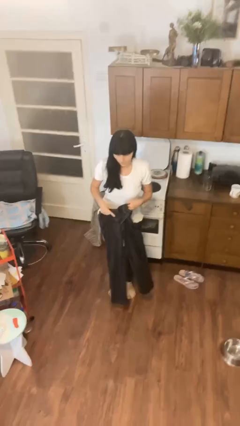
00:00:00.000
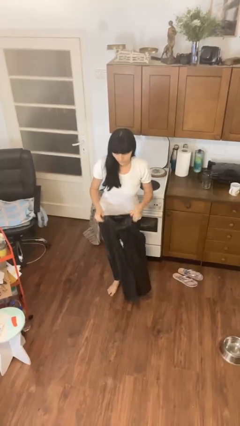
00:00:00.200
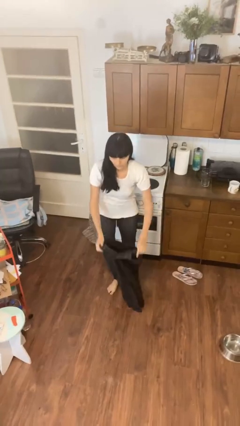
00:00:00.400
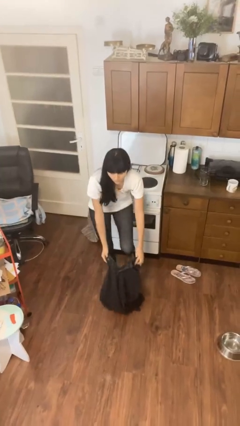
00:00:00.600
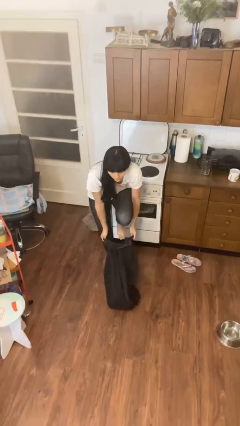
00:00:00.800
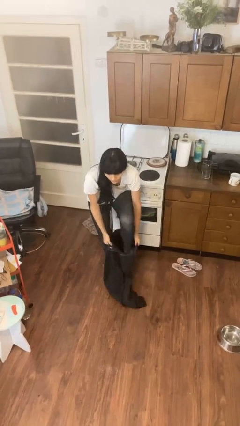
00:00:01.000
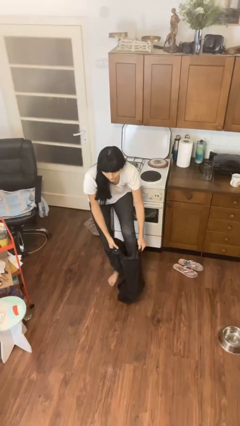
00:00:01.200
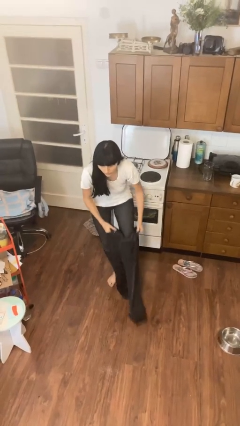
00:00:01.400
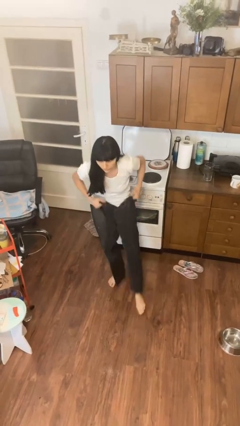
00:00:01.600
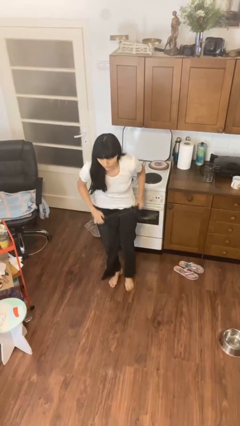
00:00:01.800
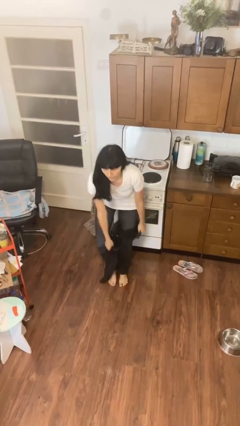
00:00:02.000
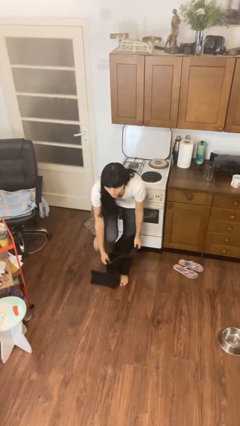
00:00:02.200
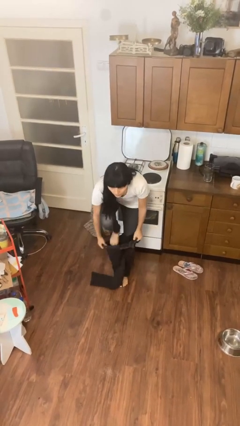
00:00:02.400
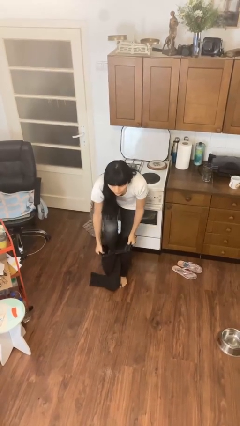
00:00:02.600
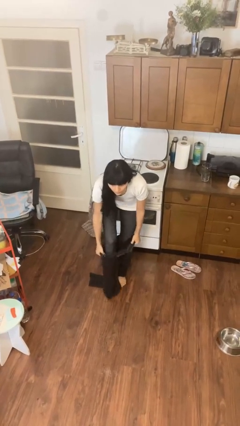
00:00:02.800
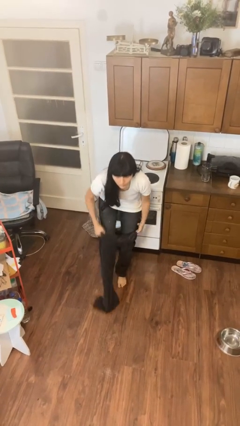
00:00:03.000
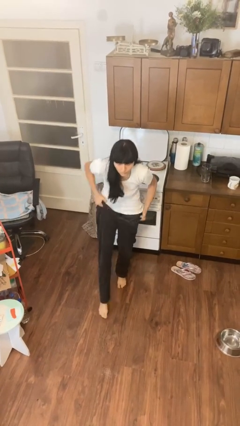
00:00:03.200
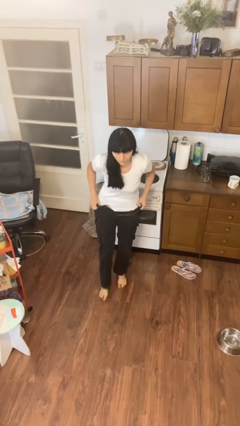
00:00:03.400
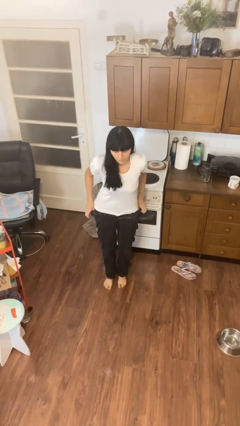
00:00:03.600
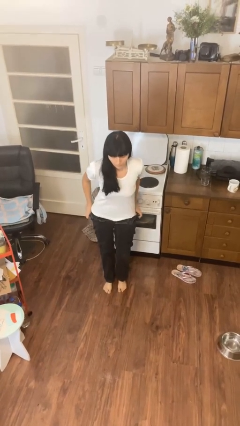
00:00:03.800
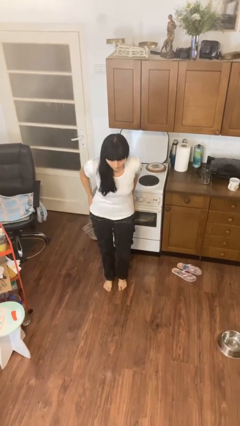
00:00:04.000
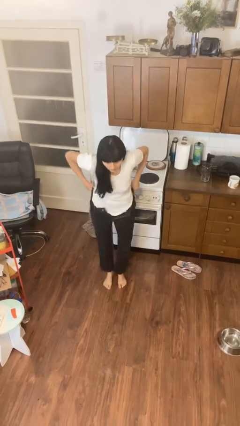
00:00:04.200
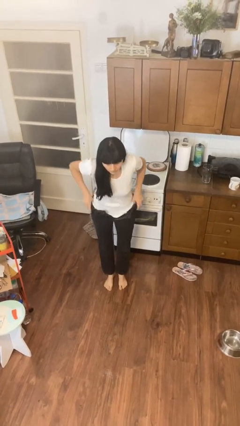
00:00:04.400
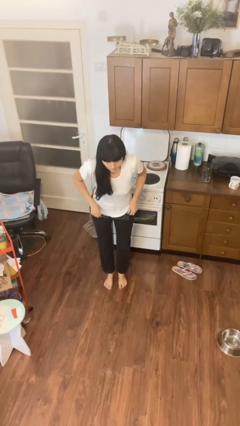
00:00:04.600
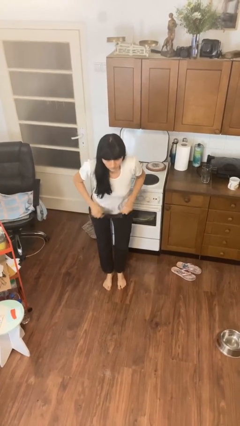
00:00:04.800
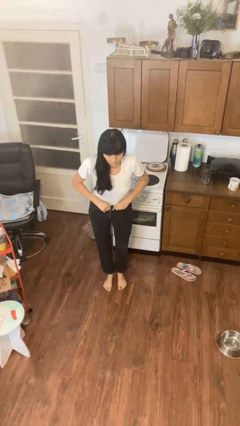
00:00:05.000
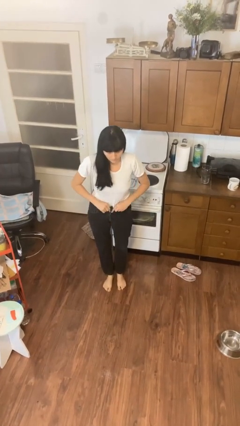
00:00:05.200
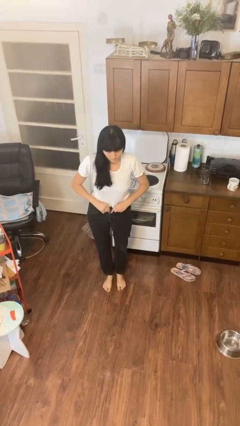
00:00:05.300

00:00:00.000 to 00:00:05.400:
person puts on pants

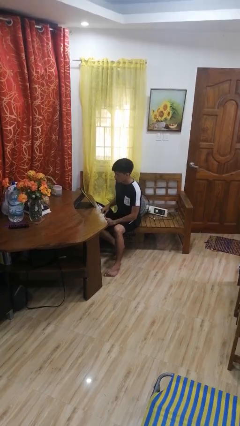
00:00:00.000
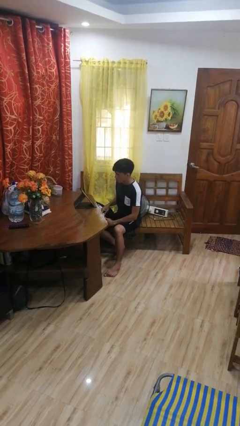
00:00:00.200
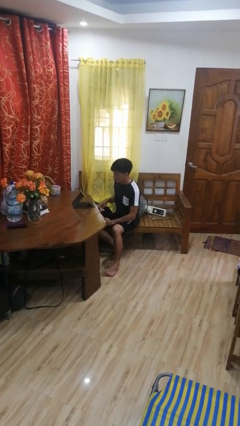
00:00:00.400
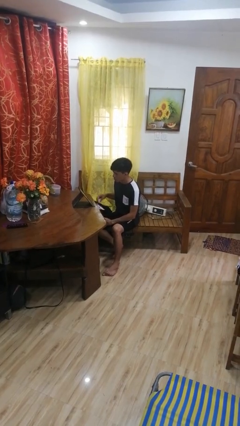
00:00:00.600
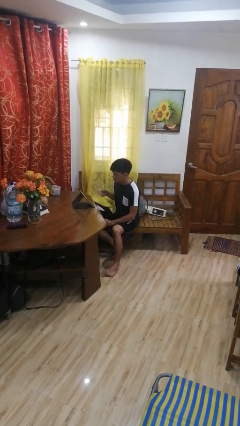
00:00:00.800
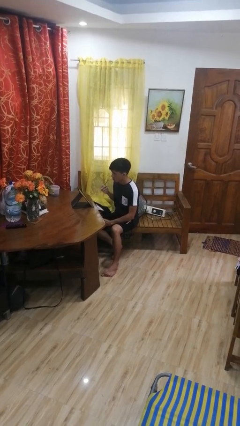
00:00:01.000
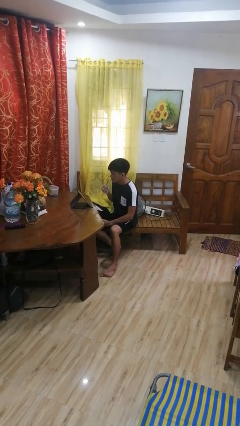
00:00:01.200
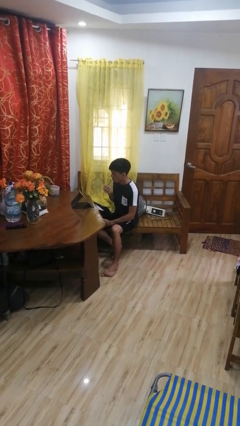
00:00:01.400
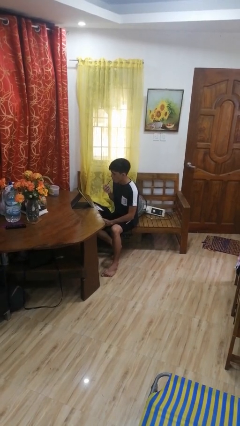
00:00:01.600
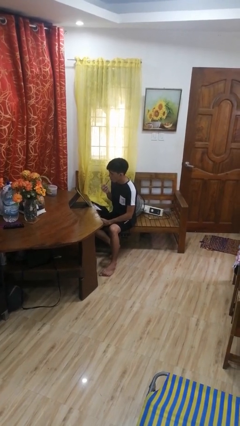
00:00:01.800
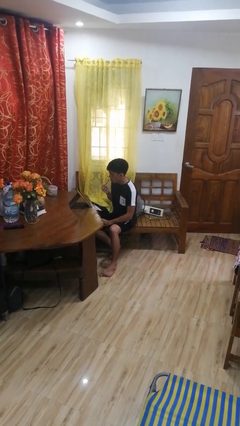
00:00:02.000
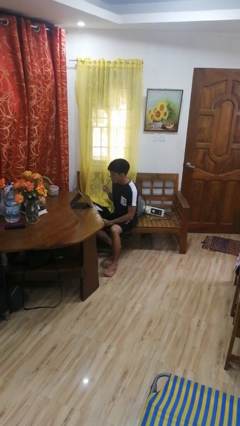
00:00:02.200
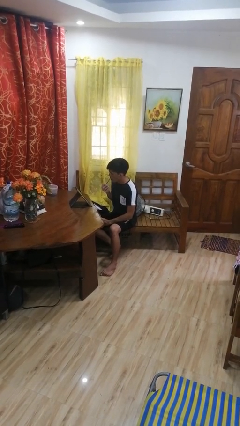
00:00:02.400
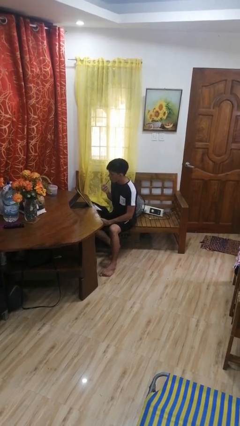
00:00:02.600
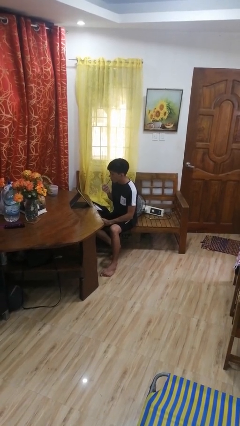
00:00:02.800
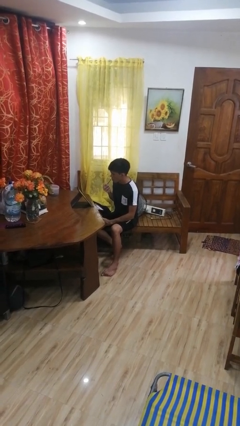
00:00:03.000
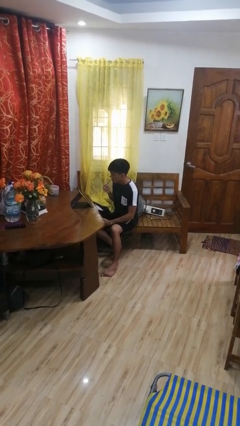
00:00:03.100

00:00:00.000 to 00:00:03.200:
person applies lip makeup

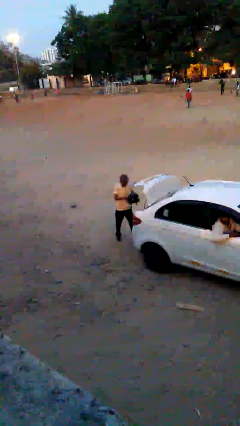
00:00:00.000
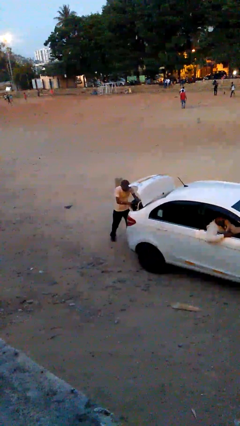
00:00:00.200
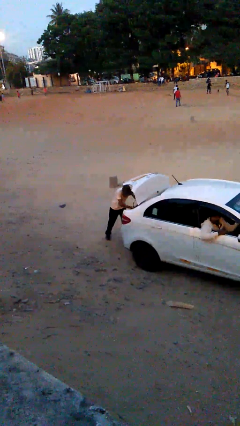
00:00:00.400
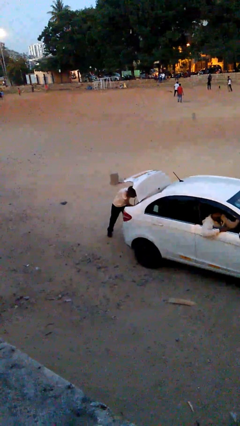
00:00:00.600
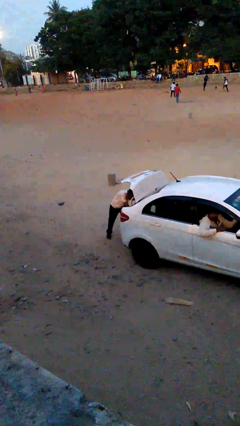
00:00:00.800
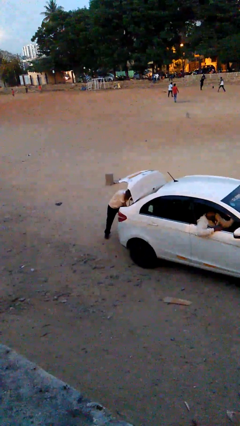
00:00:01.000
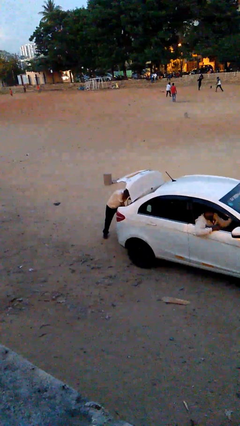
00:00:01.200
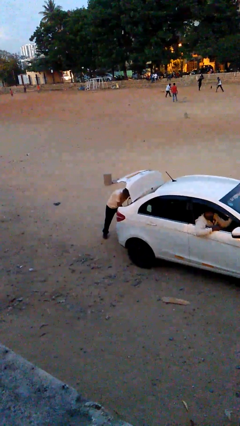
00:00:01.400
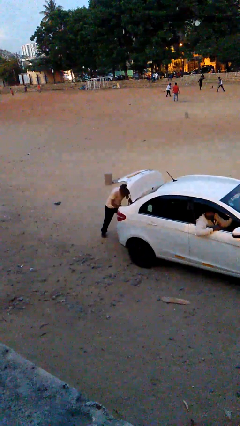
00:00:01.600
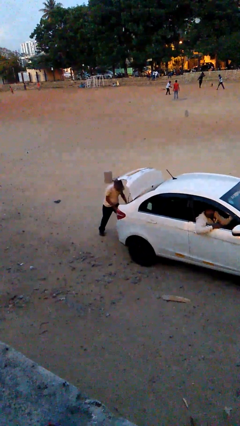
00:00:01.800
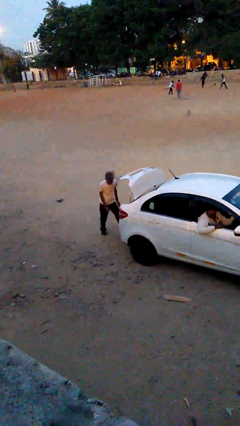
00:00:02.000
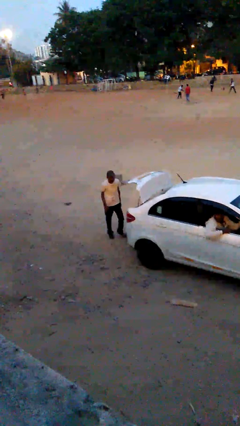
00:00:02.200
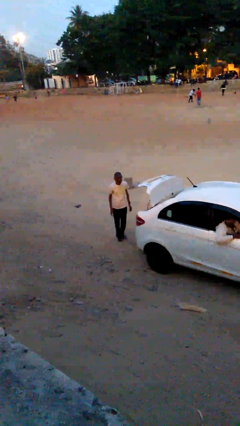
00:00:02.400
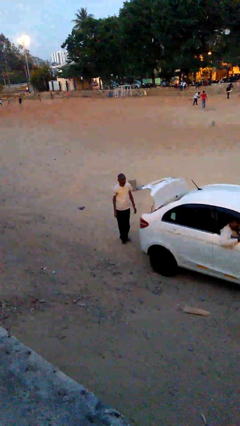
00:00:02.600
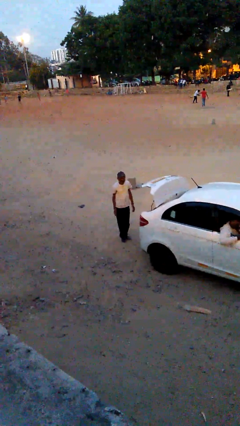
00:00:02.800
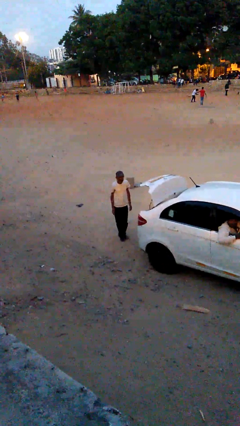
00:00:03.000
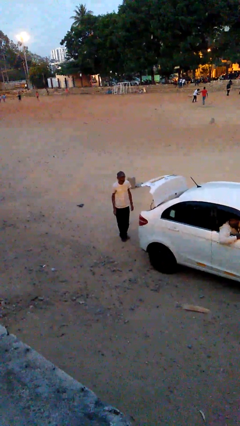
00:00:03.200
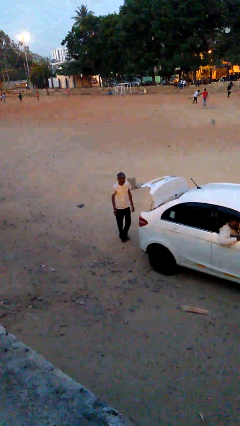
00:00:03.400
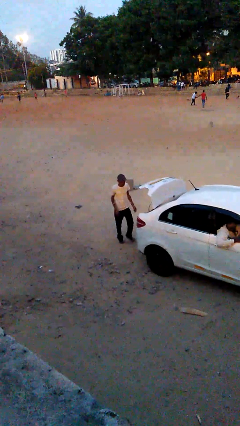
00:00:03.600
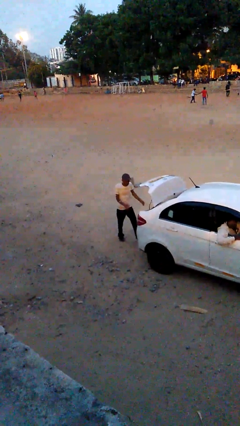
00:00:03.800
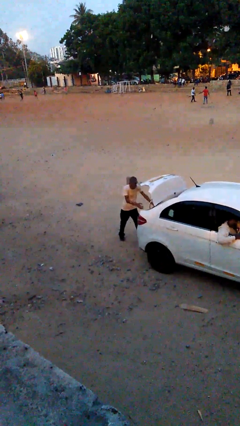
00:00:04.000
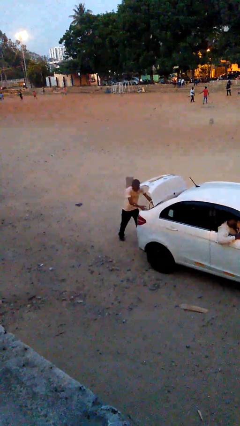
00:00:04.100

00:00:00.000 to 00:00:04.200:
person loads car

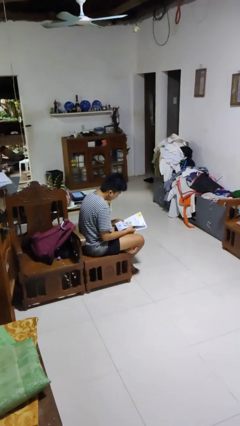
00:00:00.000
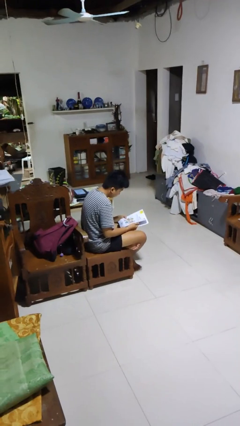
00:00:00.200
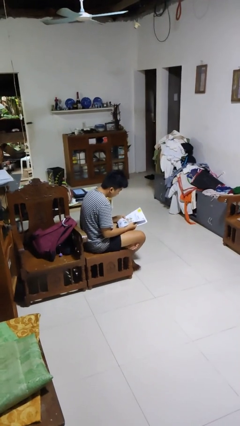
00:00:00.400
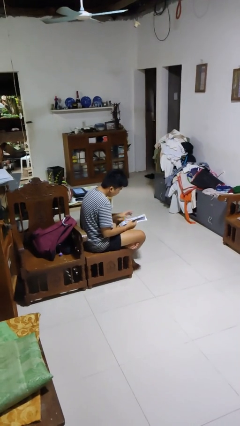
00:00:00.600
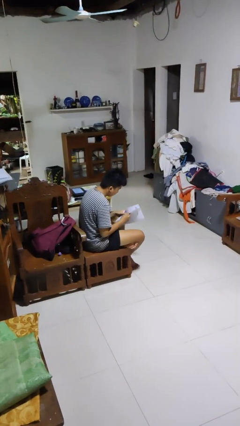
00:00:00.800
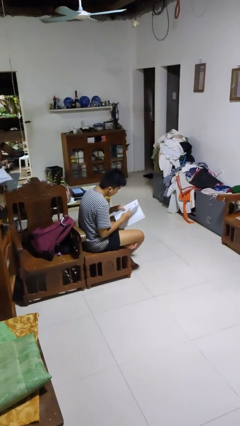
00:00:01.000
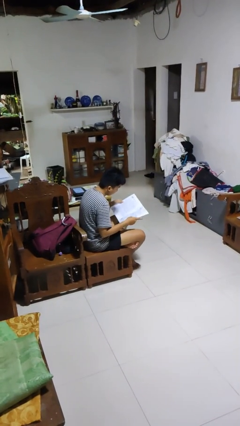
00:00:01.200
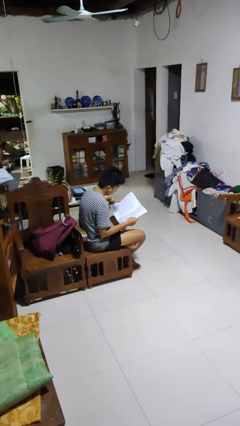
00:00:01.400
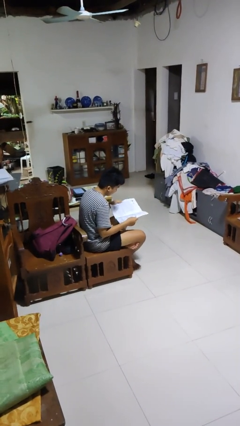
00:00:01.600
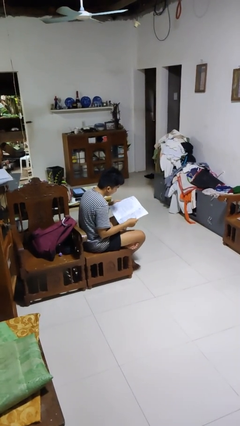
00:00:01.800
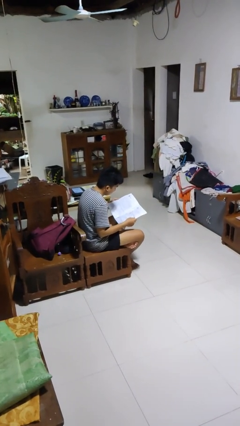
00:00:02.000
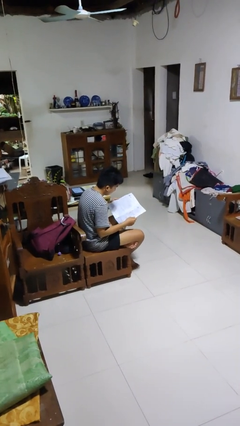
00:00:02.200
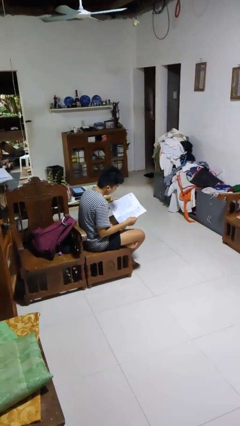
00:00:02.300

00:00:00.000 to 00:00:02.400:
person reads newspaper

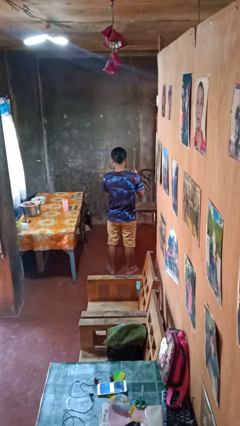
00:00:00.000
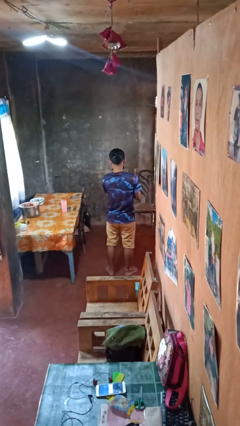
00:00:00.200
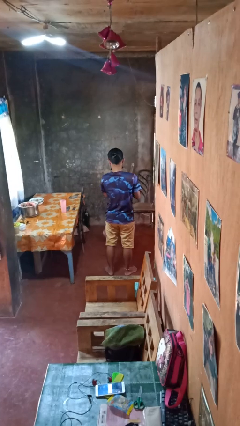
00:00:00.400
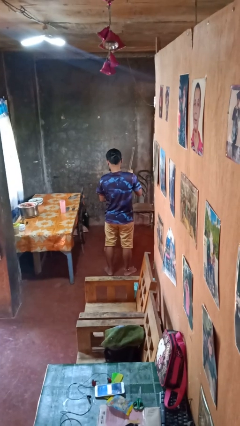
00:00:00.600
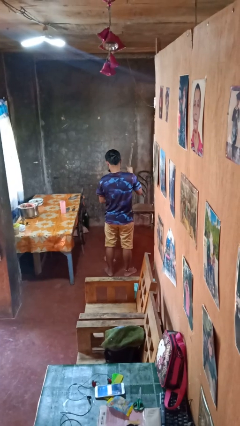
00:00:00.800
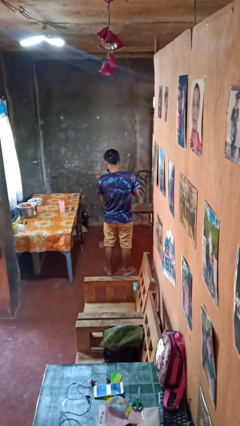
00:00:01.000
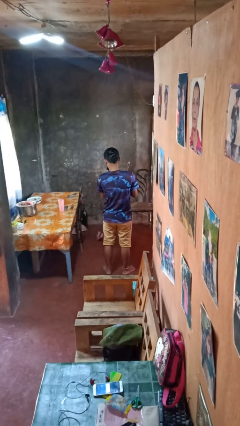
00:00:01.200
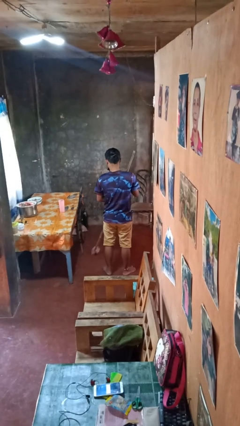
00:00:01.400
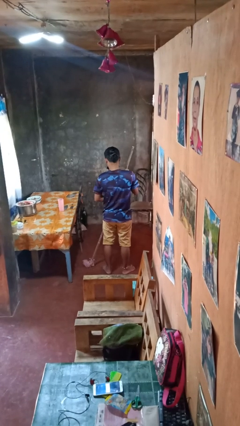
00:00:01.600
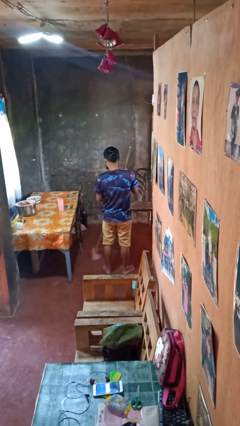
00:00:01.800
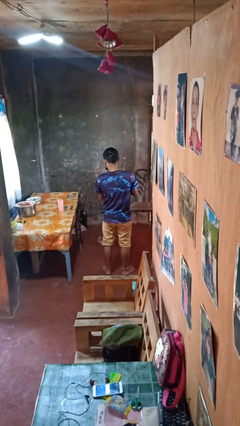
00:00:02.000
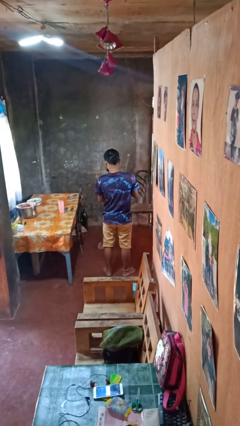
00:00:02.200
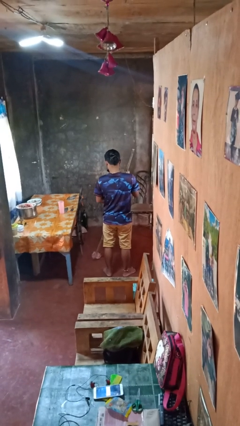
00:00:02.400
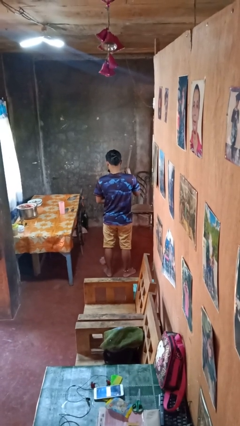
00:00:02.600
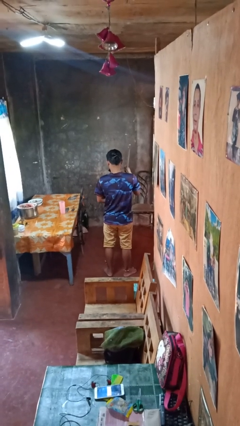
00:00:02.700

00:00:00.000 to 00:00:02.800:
person mops
